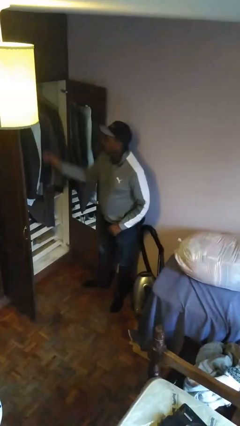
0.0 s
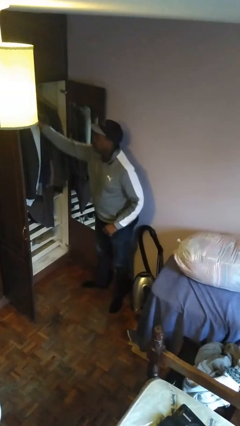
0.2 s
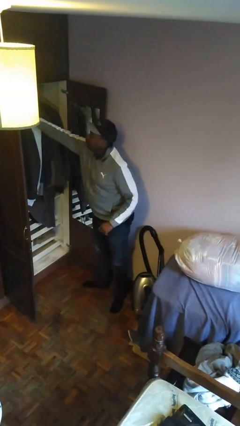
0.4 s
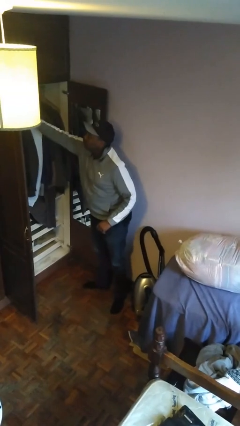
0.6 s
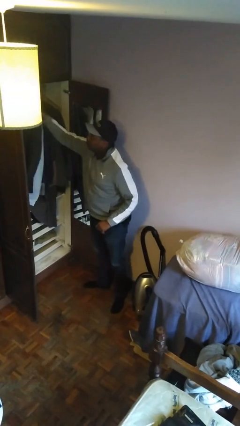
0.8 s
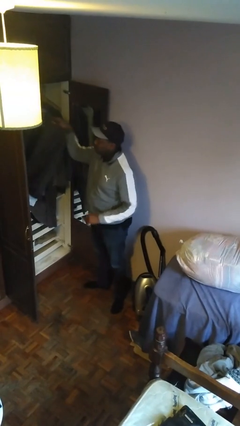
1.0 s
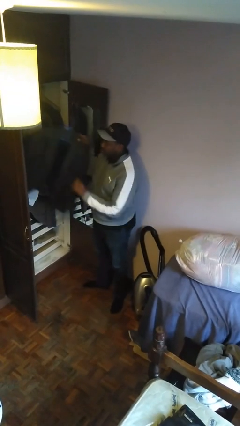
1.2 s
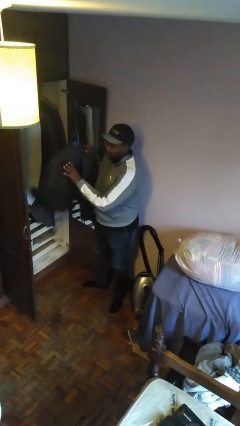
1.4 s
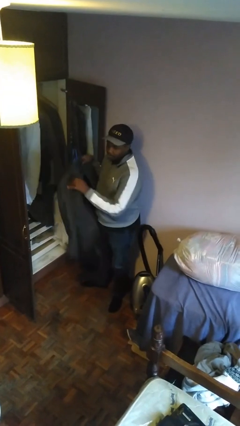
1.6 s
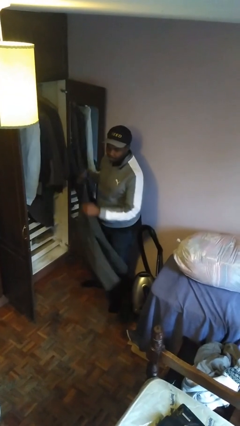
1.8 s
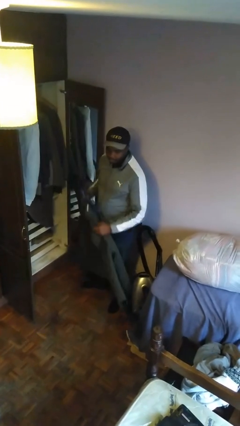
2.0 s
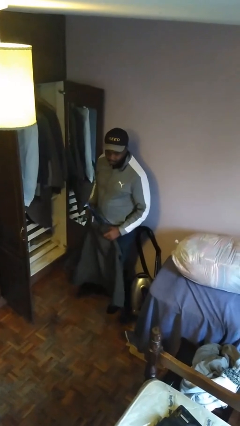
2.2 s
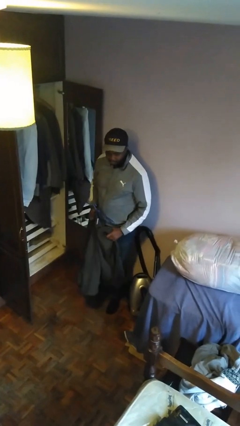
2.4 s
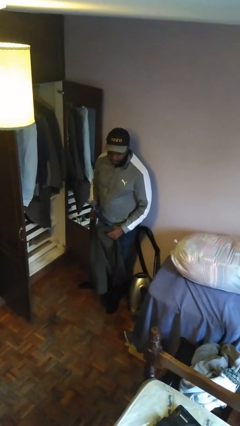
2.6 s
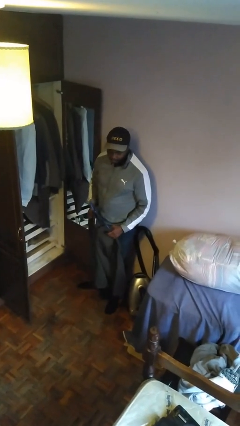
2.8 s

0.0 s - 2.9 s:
person takes clothes from closet

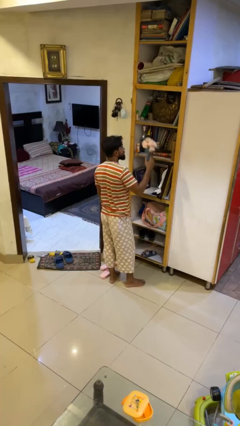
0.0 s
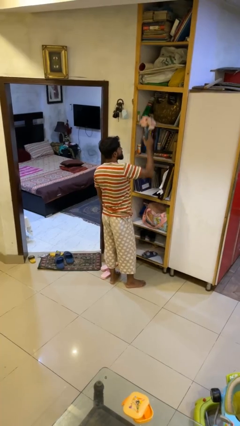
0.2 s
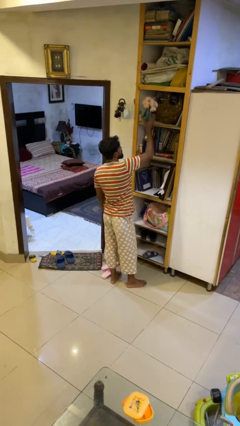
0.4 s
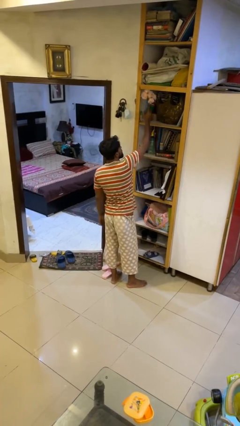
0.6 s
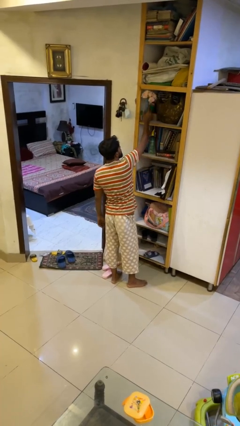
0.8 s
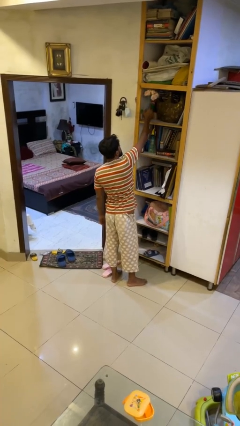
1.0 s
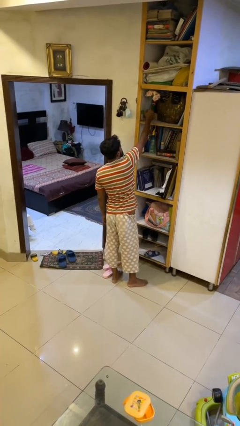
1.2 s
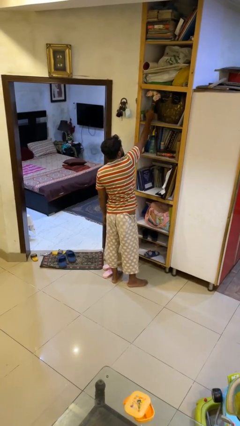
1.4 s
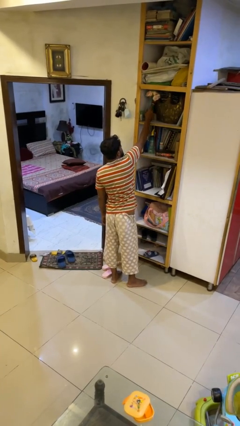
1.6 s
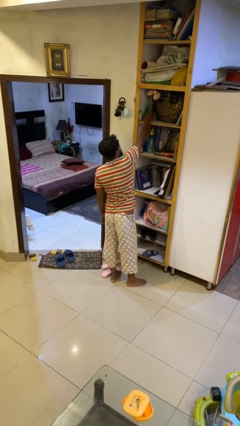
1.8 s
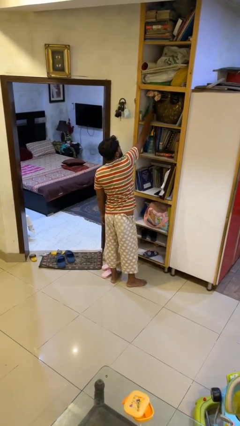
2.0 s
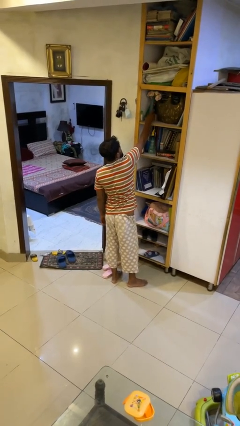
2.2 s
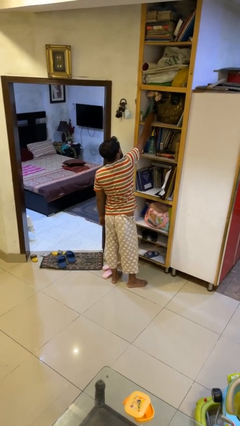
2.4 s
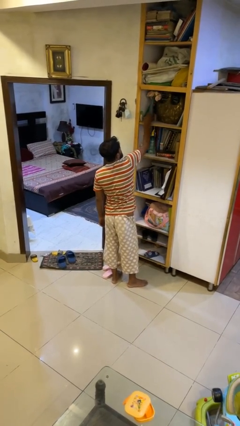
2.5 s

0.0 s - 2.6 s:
person puts down object on shelf

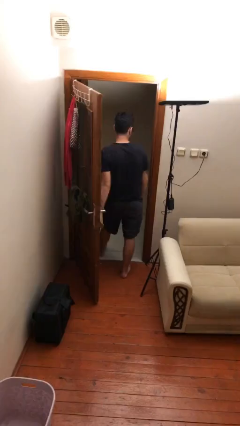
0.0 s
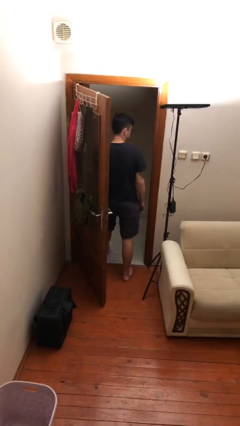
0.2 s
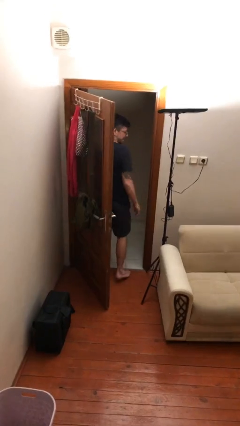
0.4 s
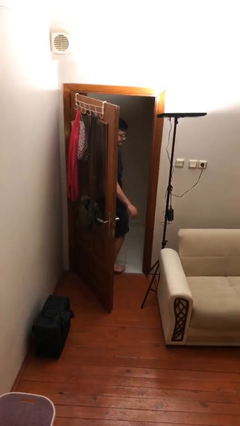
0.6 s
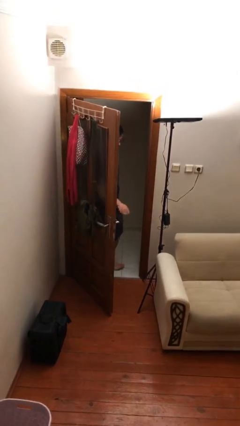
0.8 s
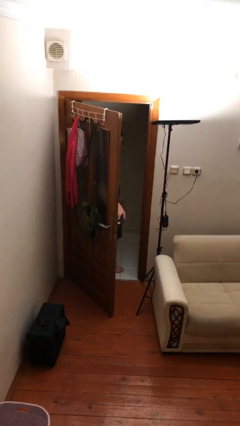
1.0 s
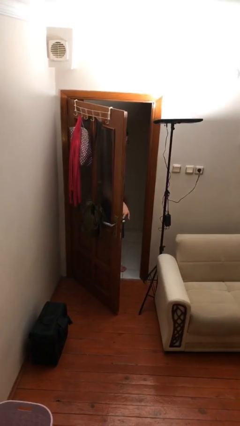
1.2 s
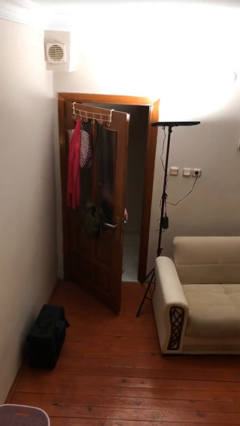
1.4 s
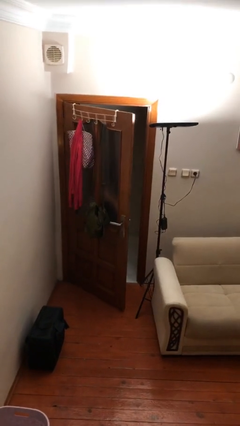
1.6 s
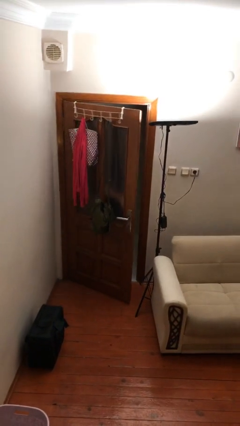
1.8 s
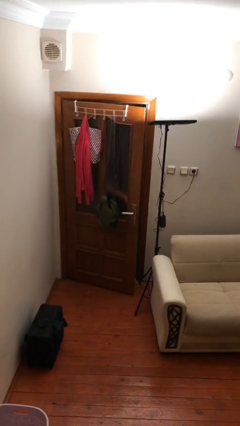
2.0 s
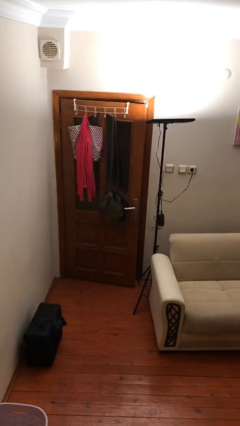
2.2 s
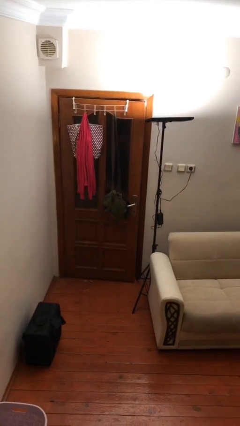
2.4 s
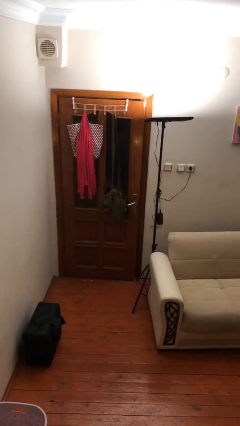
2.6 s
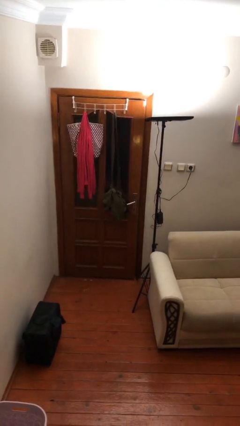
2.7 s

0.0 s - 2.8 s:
person closes facility door

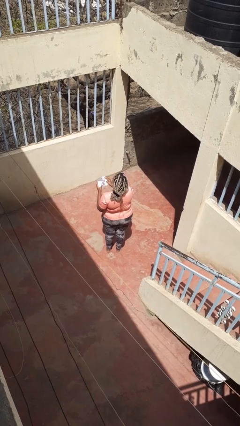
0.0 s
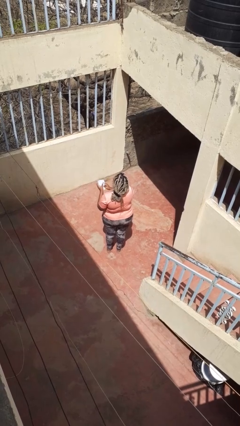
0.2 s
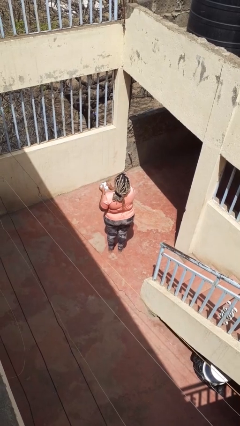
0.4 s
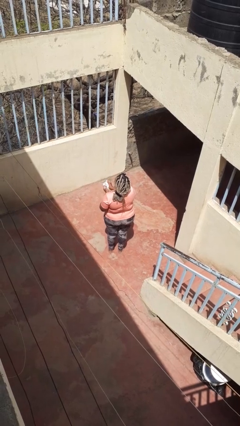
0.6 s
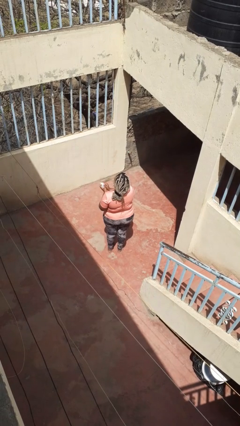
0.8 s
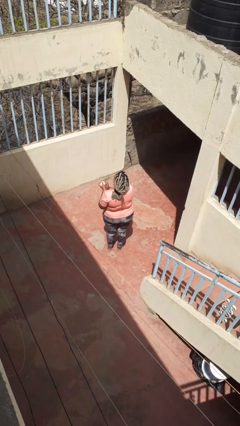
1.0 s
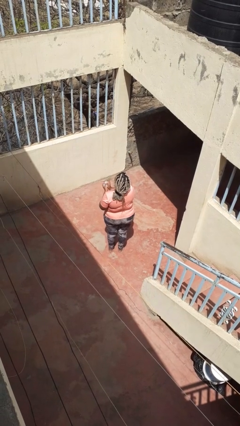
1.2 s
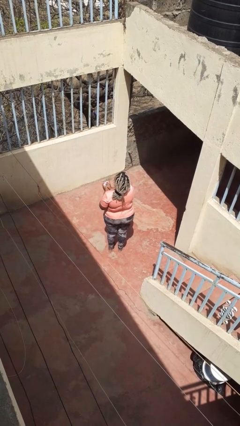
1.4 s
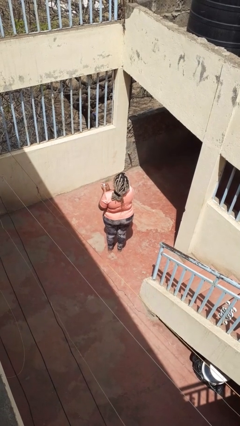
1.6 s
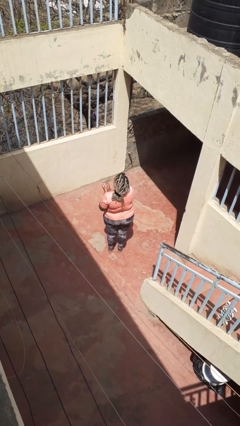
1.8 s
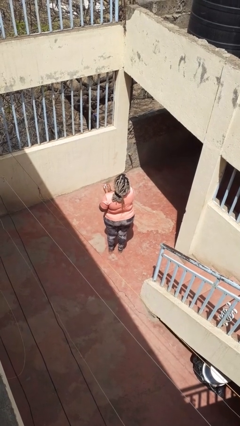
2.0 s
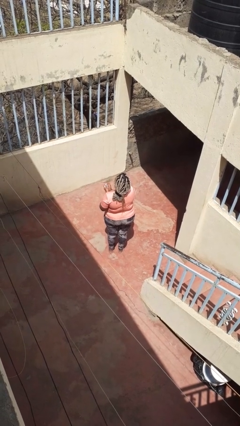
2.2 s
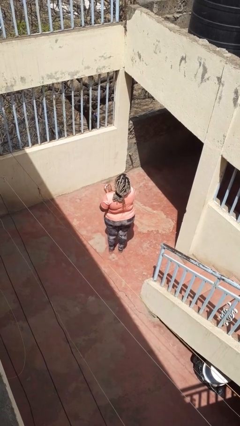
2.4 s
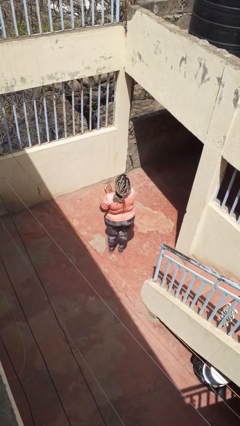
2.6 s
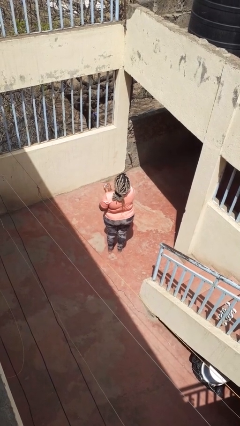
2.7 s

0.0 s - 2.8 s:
person crumples paper

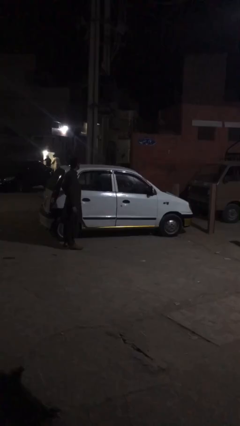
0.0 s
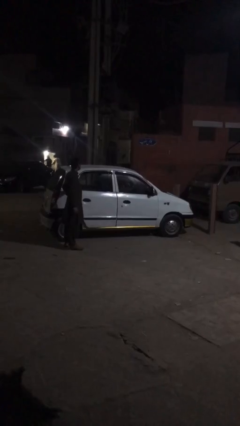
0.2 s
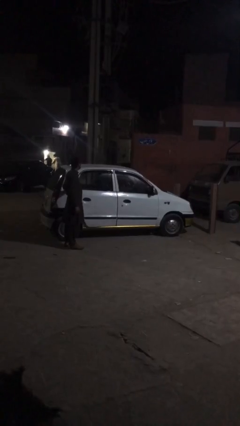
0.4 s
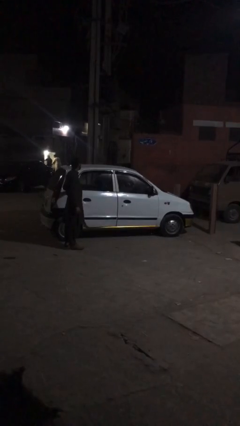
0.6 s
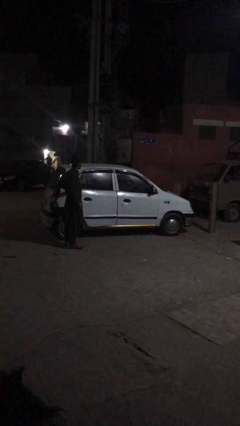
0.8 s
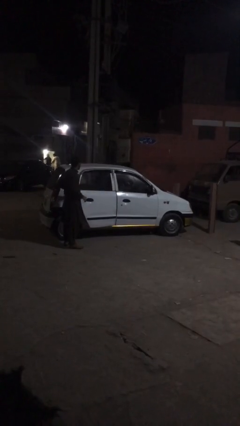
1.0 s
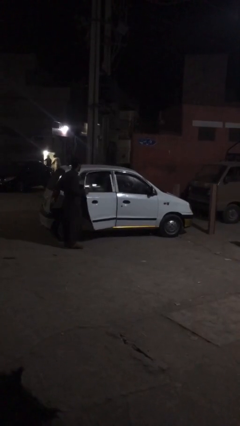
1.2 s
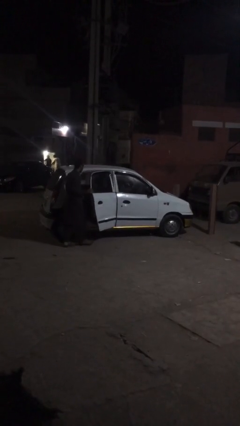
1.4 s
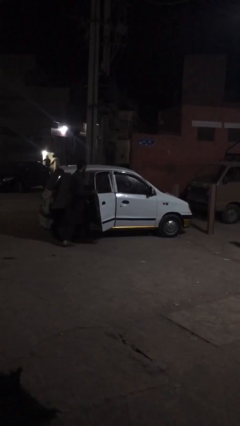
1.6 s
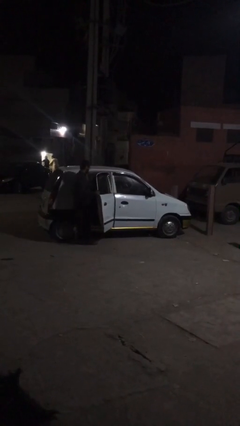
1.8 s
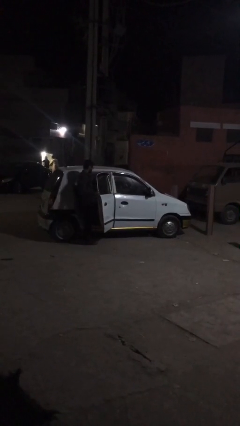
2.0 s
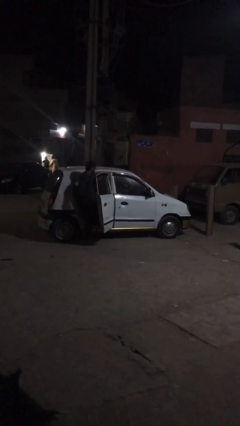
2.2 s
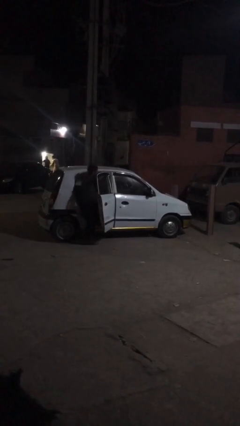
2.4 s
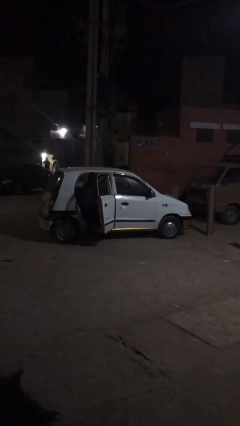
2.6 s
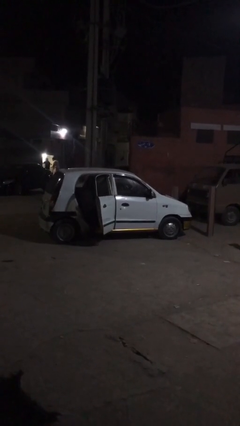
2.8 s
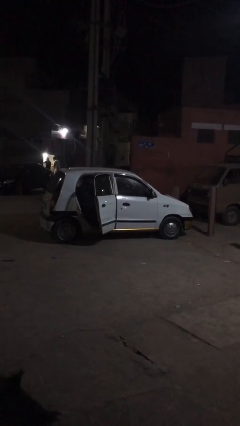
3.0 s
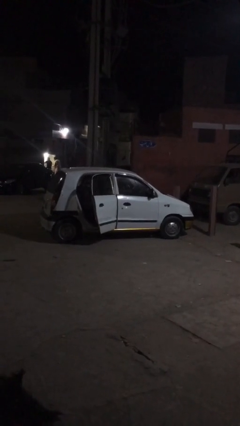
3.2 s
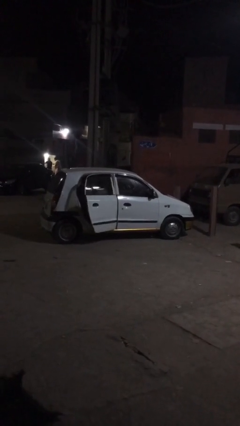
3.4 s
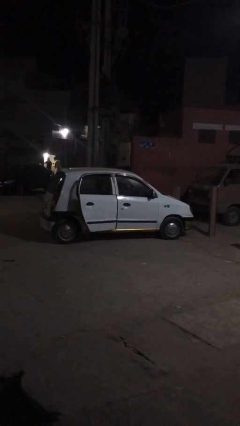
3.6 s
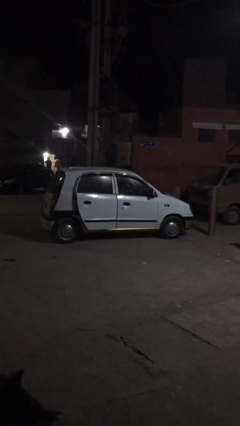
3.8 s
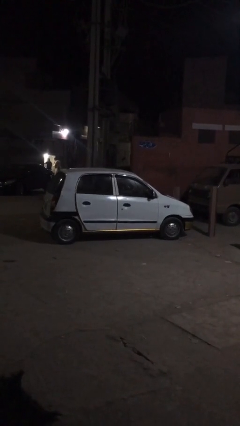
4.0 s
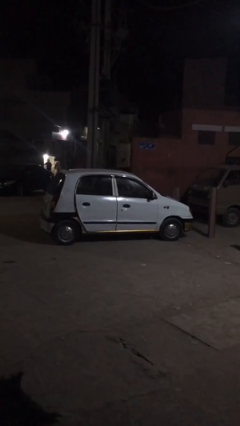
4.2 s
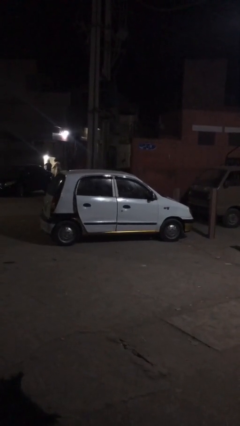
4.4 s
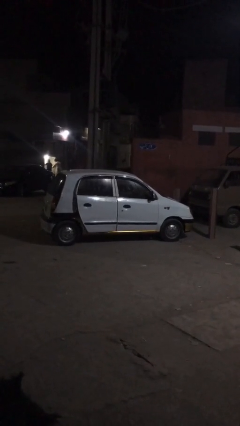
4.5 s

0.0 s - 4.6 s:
car picks up person

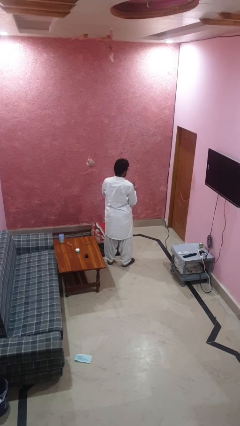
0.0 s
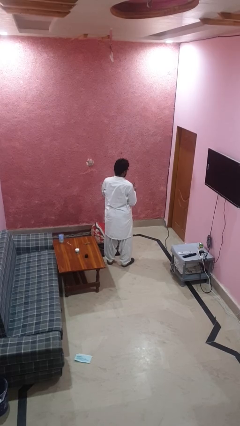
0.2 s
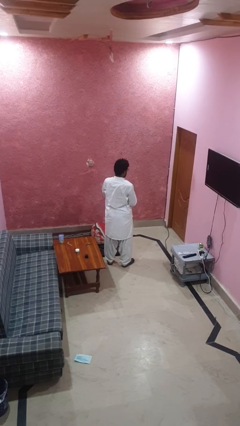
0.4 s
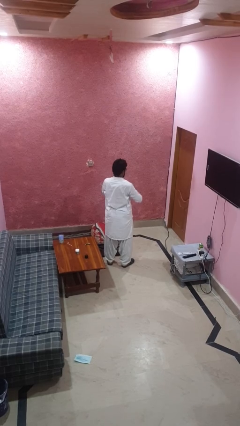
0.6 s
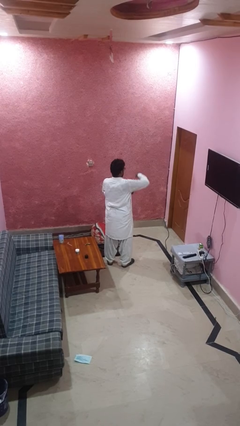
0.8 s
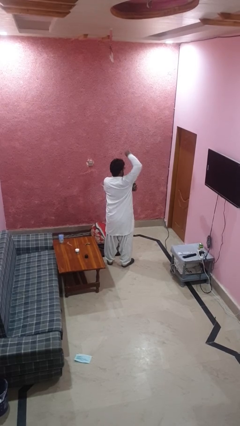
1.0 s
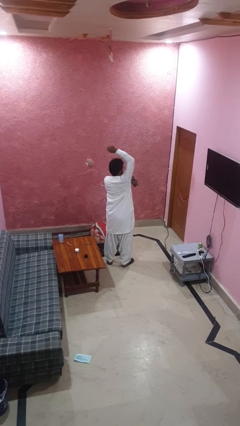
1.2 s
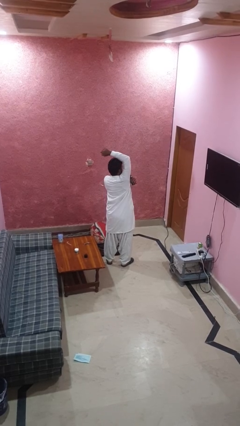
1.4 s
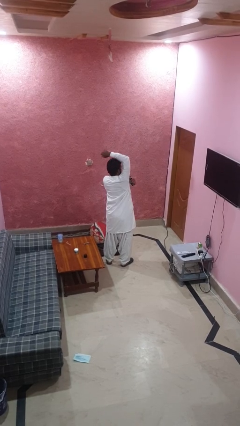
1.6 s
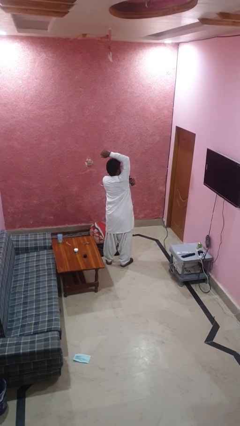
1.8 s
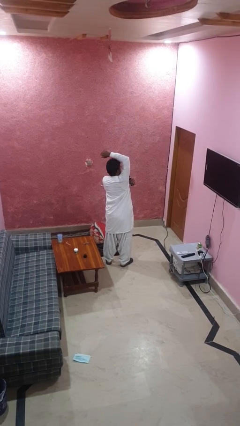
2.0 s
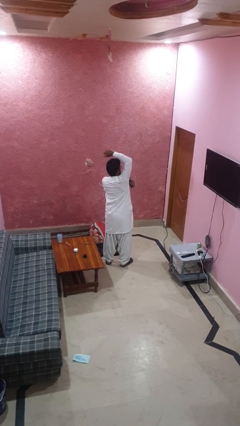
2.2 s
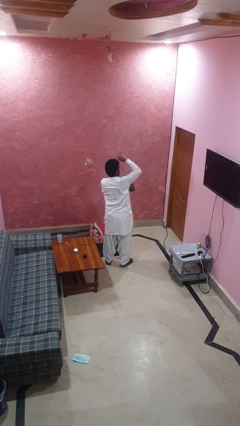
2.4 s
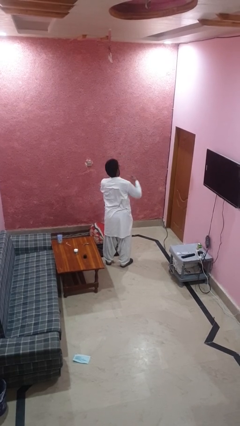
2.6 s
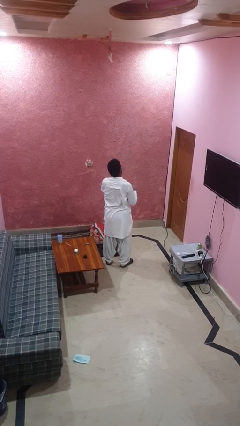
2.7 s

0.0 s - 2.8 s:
person applies deodorant
